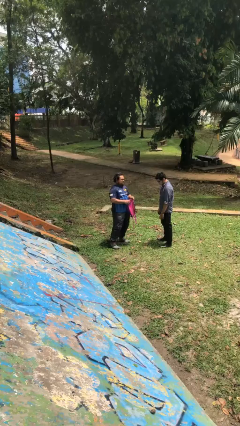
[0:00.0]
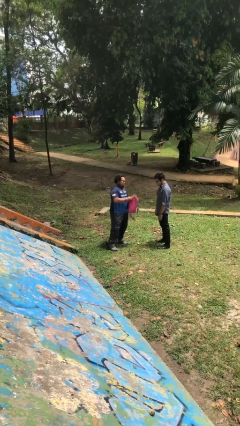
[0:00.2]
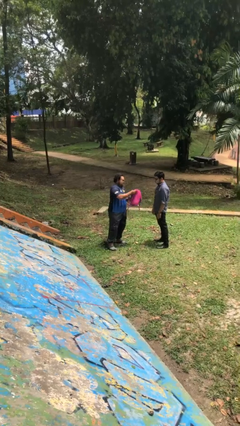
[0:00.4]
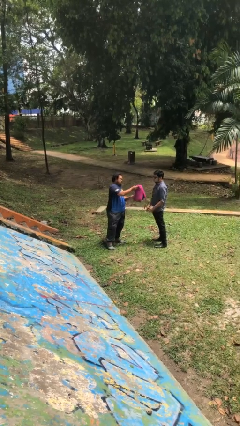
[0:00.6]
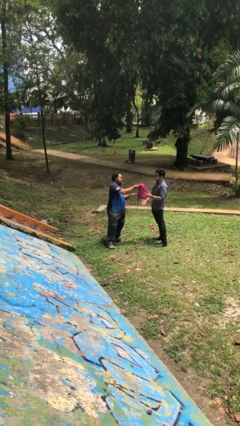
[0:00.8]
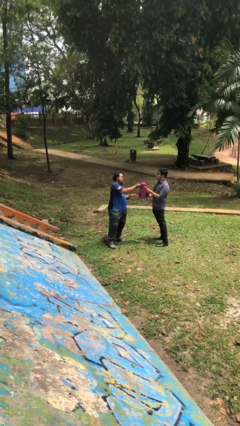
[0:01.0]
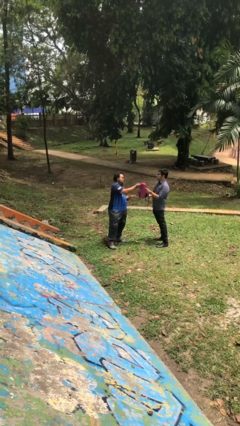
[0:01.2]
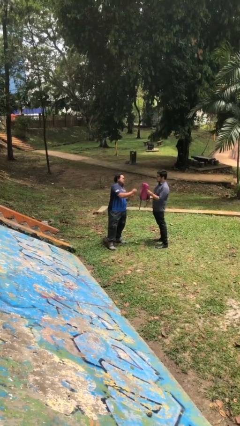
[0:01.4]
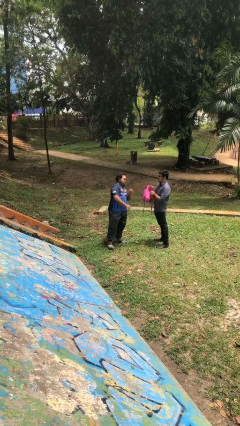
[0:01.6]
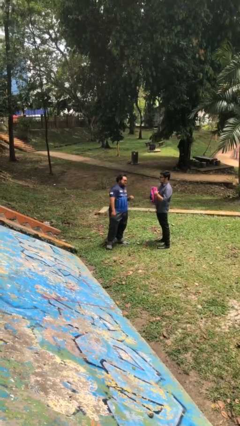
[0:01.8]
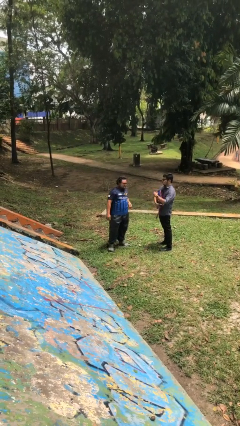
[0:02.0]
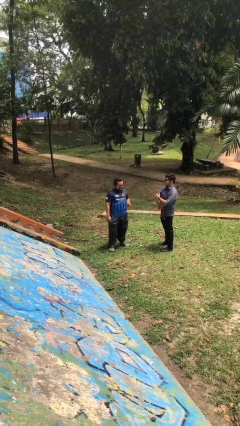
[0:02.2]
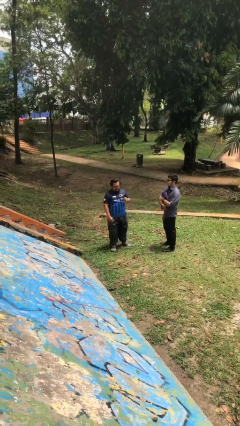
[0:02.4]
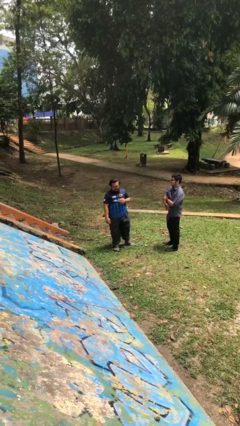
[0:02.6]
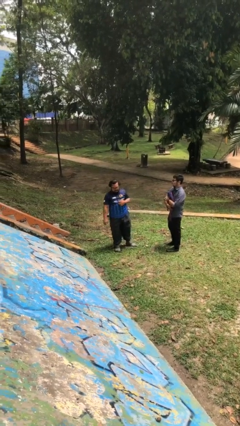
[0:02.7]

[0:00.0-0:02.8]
person transfers object to person

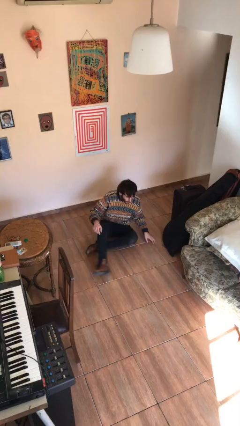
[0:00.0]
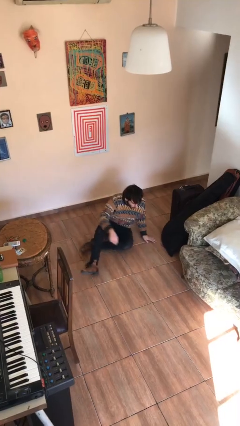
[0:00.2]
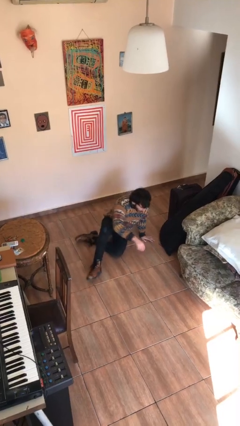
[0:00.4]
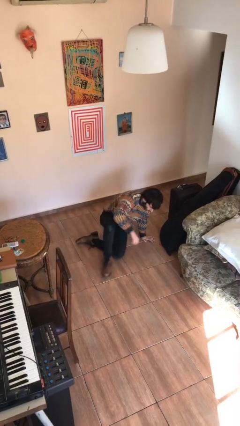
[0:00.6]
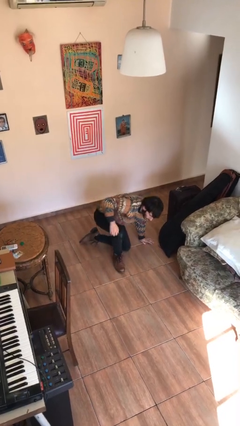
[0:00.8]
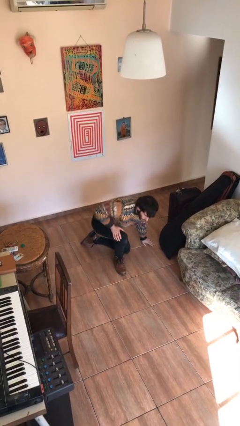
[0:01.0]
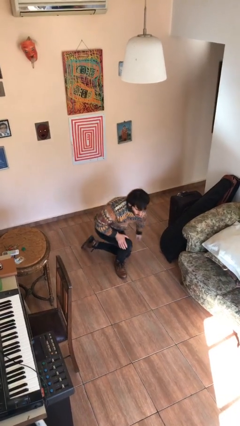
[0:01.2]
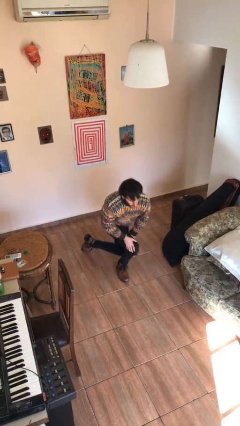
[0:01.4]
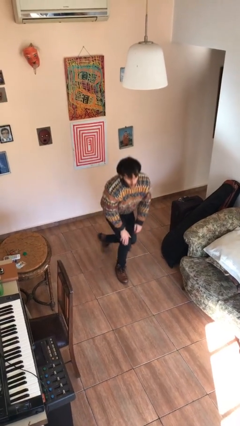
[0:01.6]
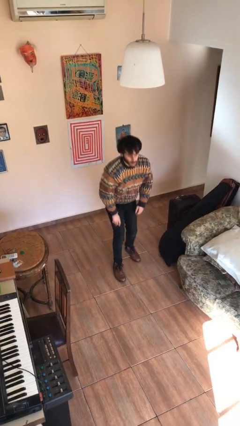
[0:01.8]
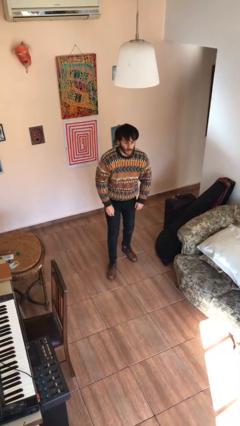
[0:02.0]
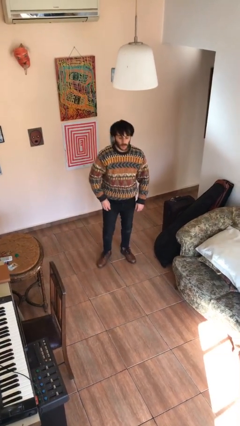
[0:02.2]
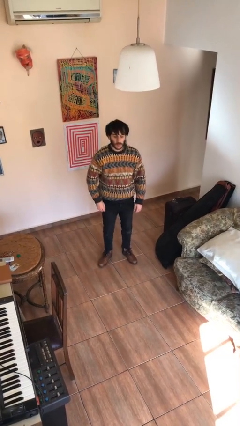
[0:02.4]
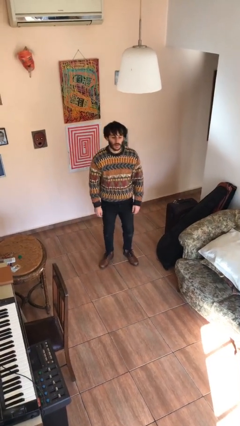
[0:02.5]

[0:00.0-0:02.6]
person stands up from floor

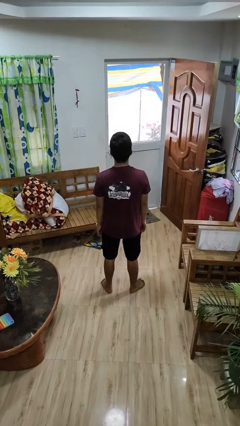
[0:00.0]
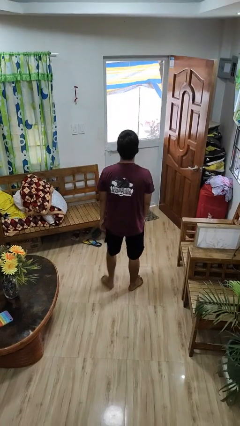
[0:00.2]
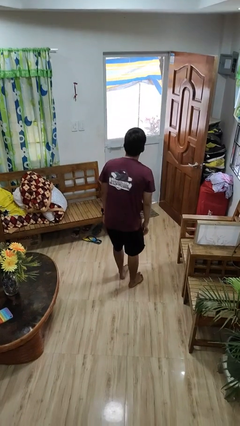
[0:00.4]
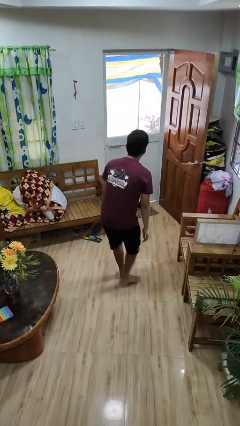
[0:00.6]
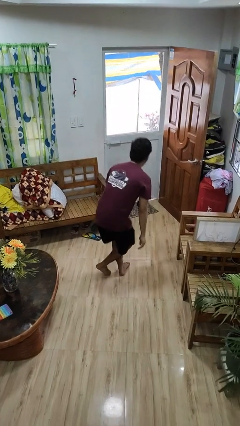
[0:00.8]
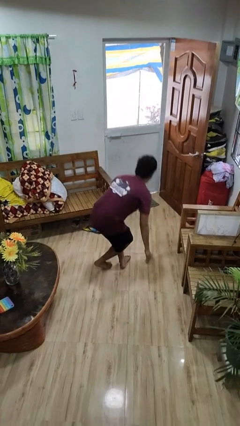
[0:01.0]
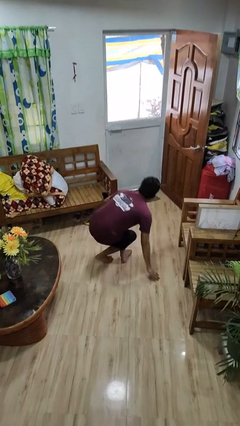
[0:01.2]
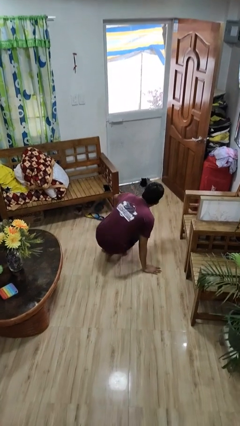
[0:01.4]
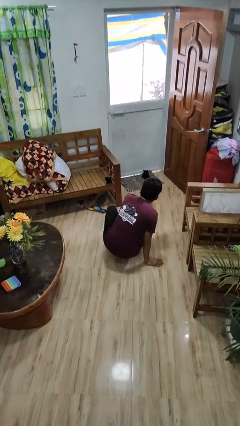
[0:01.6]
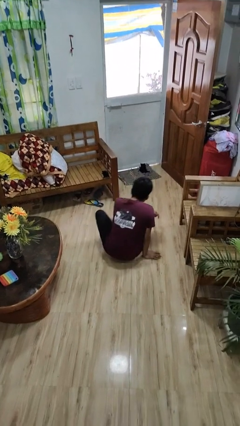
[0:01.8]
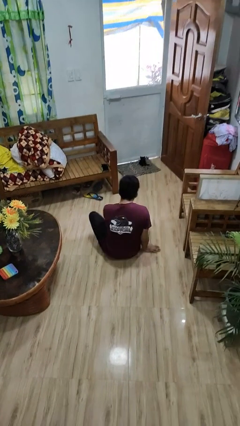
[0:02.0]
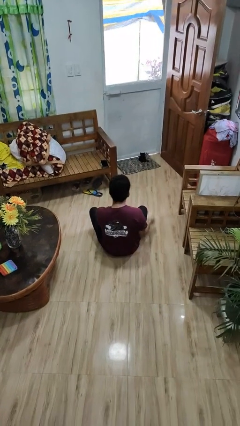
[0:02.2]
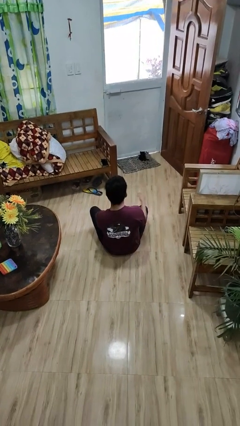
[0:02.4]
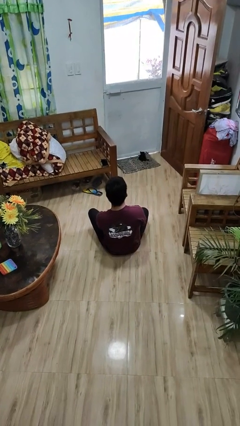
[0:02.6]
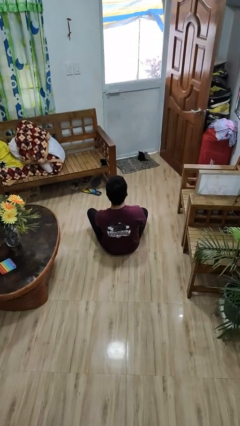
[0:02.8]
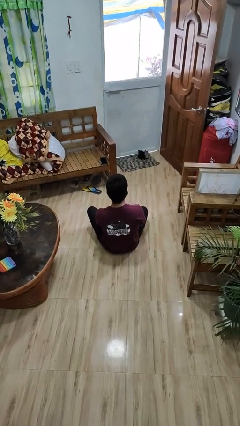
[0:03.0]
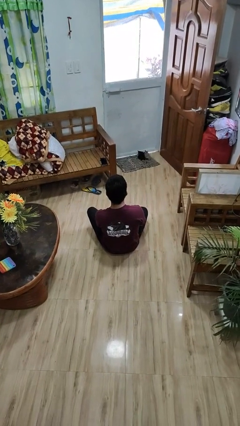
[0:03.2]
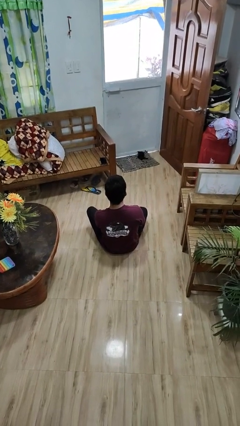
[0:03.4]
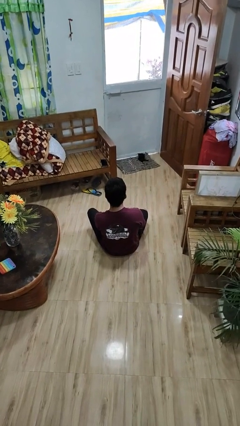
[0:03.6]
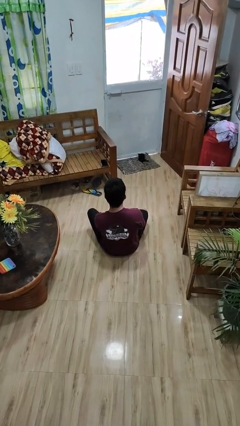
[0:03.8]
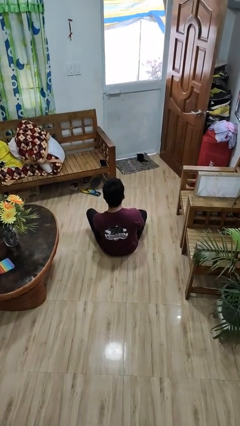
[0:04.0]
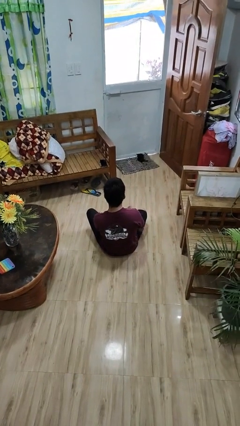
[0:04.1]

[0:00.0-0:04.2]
person sits crisscross

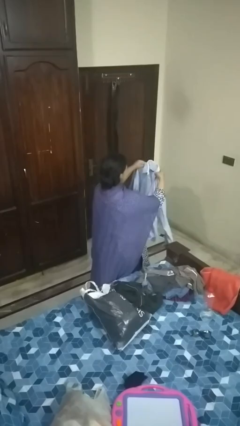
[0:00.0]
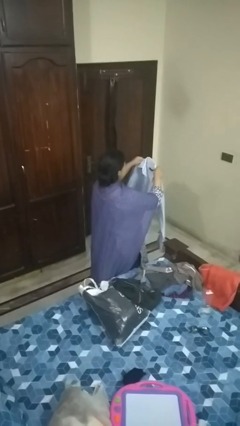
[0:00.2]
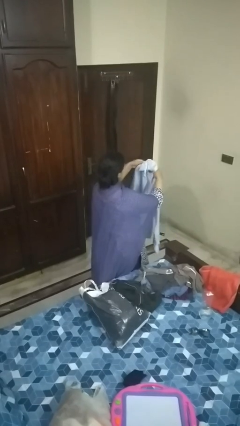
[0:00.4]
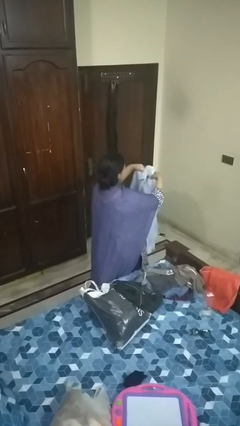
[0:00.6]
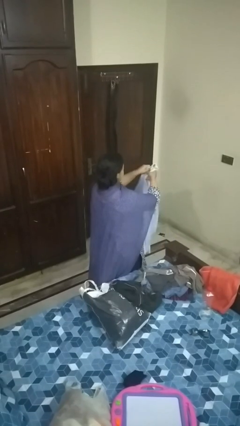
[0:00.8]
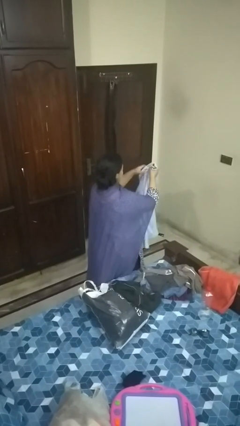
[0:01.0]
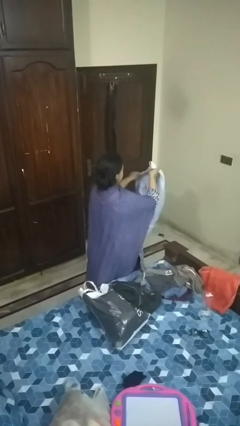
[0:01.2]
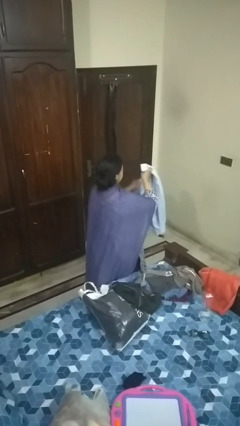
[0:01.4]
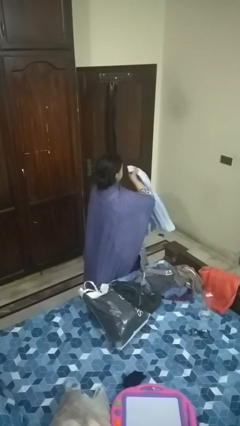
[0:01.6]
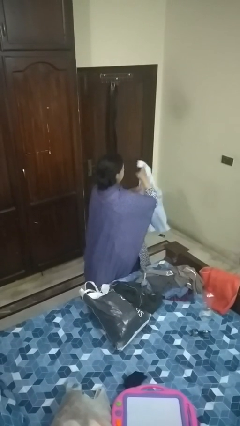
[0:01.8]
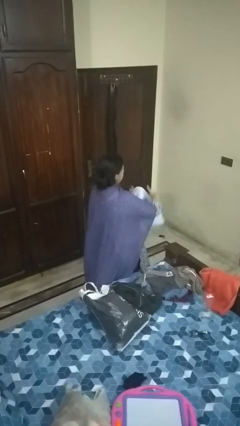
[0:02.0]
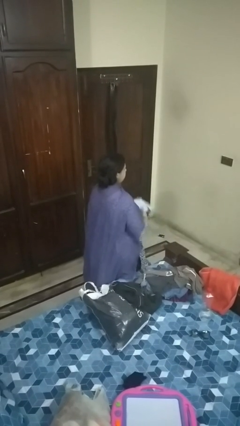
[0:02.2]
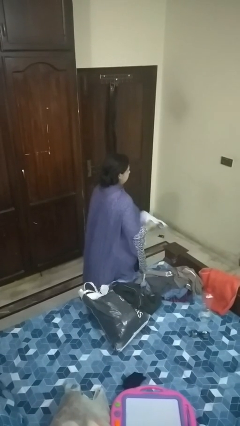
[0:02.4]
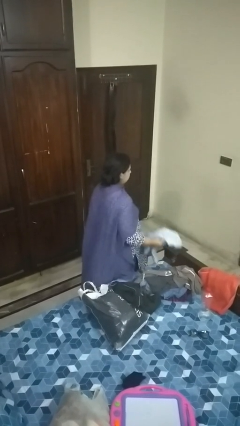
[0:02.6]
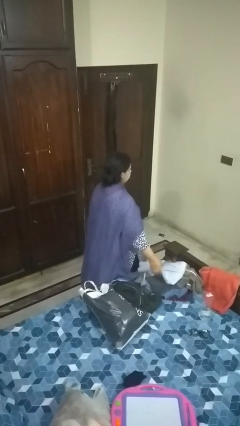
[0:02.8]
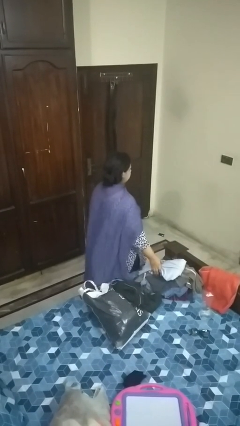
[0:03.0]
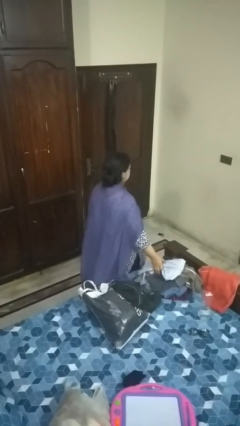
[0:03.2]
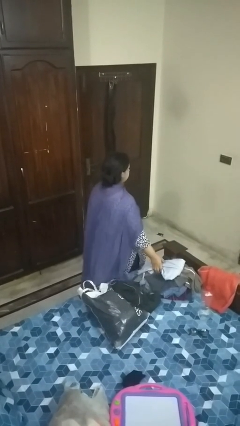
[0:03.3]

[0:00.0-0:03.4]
person folds shirt

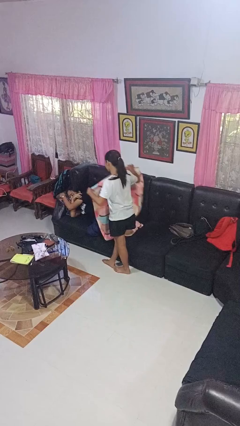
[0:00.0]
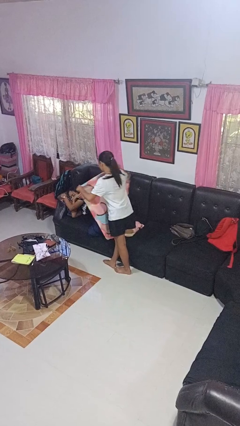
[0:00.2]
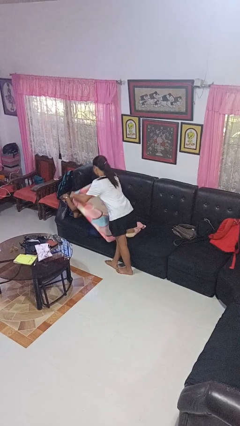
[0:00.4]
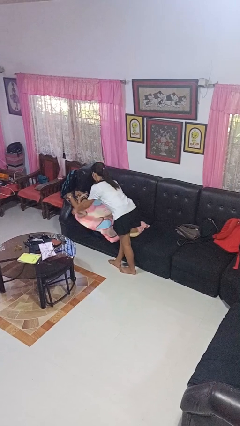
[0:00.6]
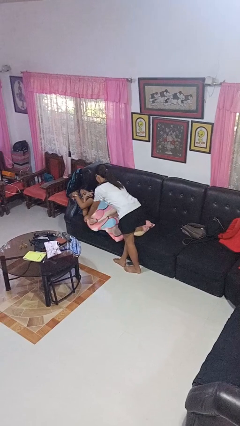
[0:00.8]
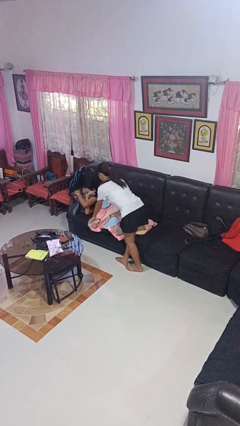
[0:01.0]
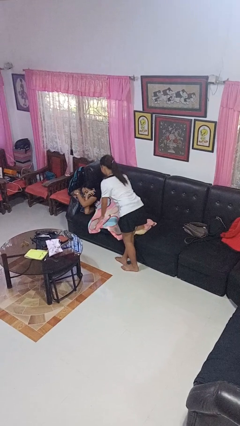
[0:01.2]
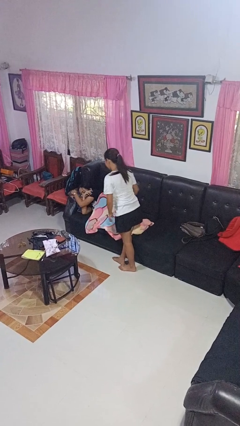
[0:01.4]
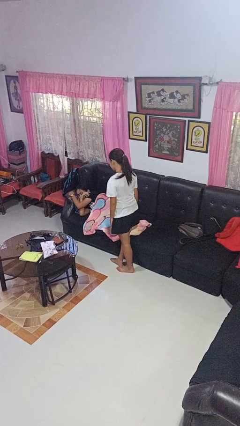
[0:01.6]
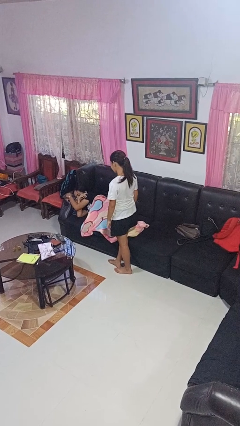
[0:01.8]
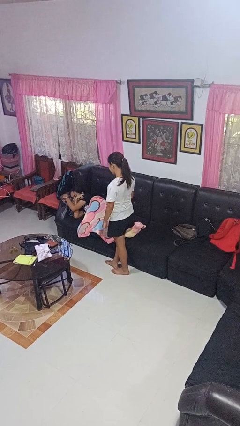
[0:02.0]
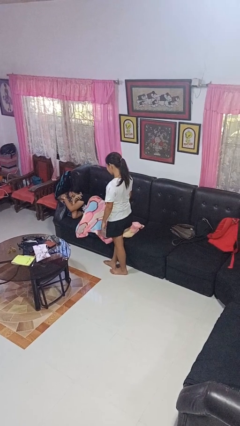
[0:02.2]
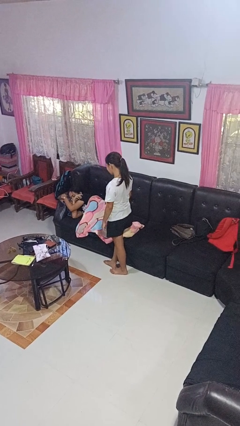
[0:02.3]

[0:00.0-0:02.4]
person covers friend with blanket

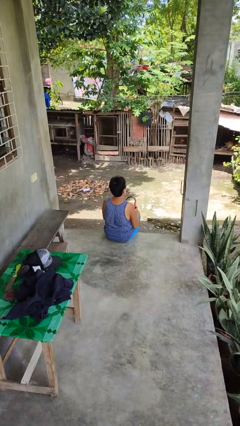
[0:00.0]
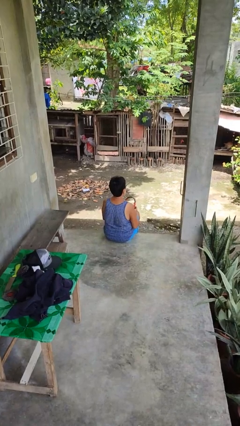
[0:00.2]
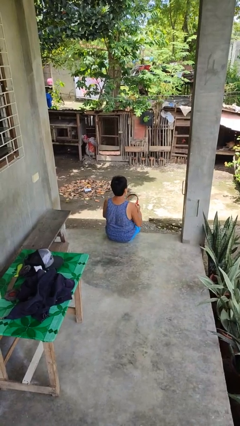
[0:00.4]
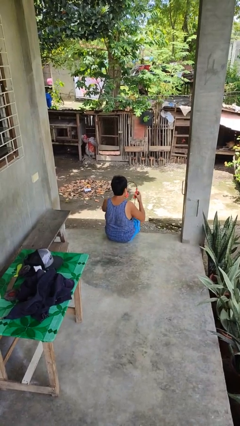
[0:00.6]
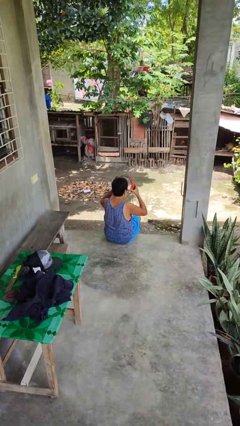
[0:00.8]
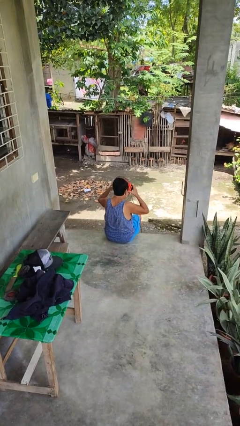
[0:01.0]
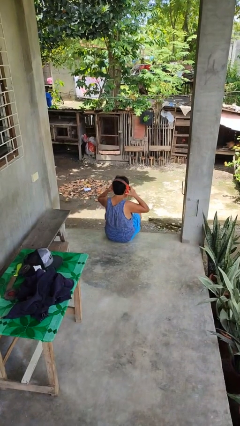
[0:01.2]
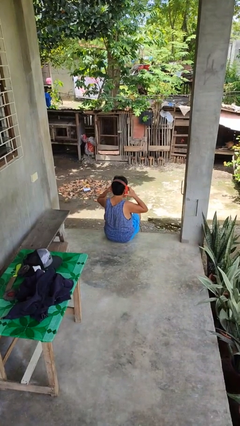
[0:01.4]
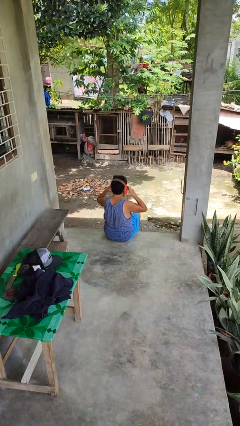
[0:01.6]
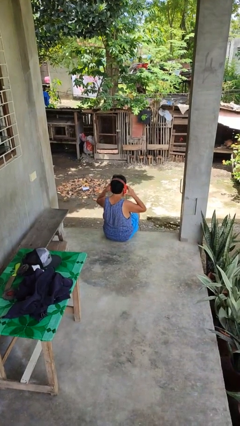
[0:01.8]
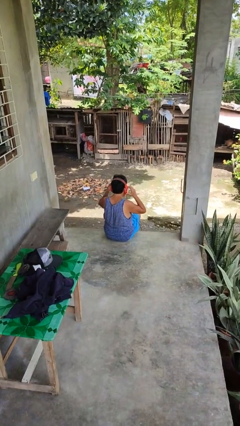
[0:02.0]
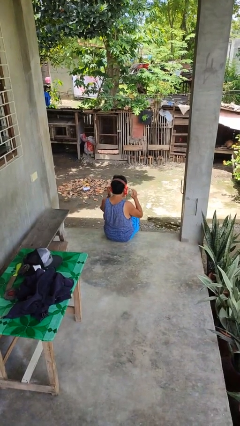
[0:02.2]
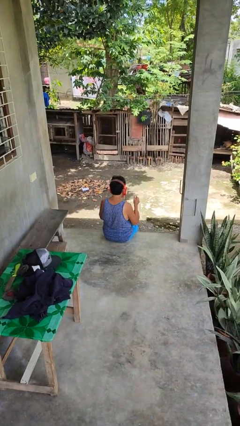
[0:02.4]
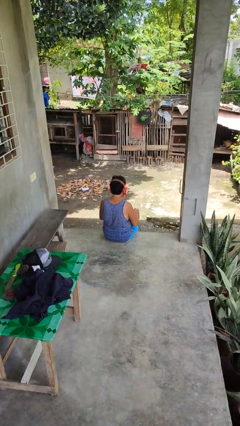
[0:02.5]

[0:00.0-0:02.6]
person puts on headphones
